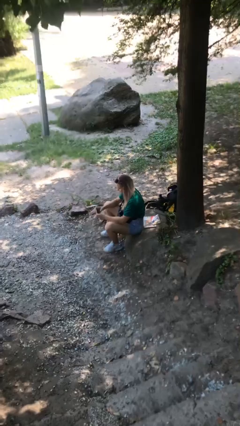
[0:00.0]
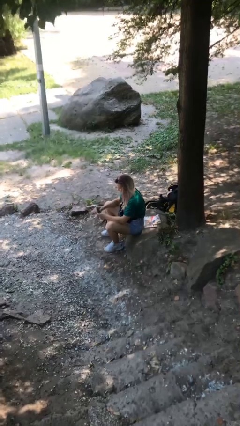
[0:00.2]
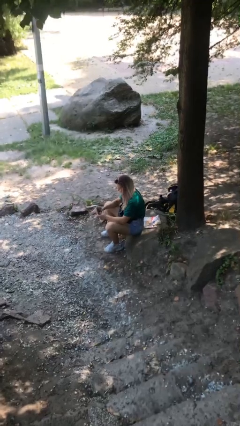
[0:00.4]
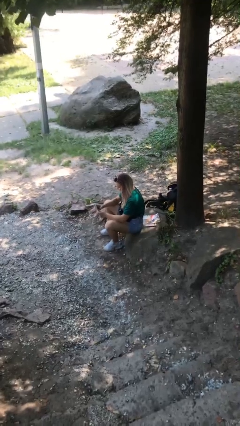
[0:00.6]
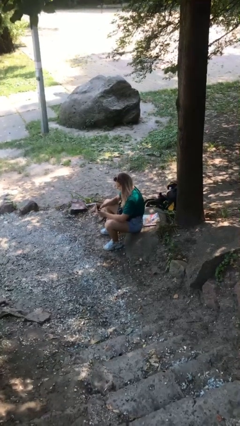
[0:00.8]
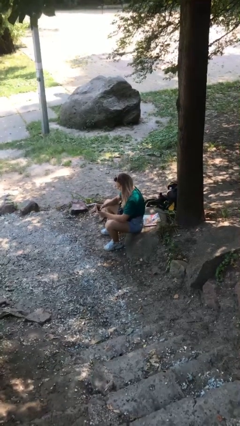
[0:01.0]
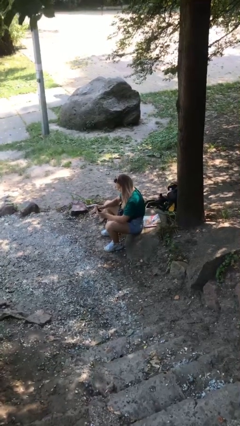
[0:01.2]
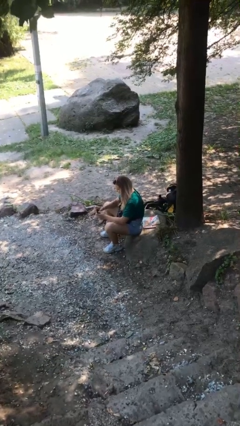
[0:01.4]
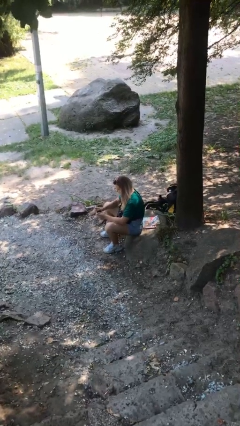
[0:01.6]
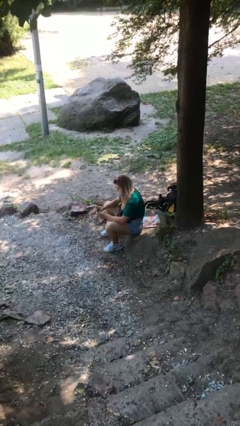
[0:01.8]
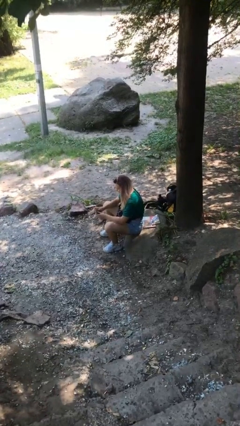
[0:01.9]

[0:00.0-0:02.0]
person interacts with handheld game

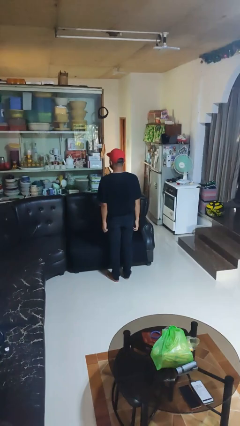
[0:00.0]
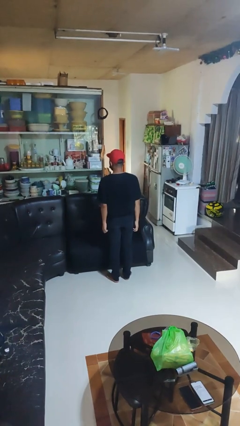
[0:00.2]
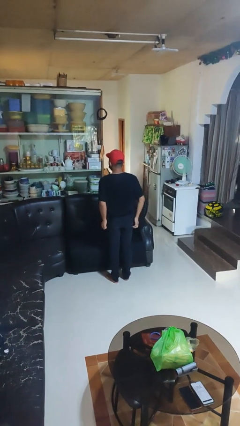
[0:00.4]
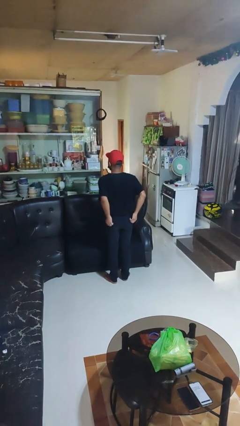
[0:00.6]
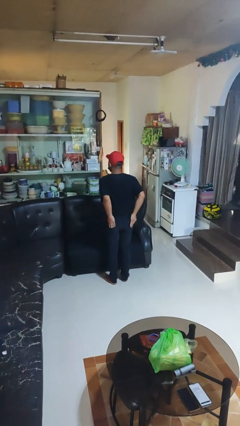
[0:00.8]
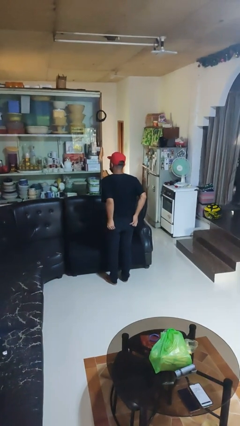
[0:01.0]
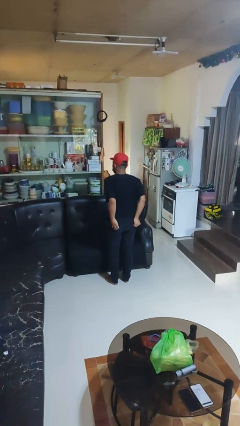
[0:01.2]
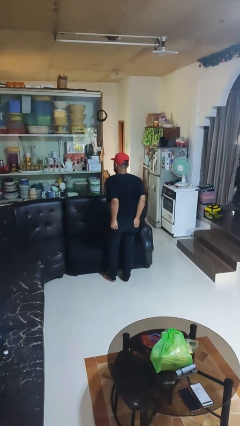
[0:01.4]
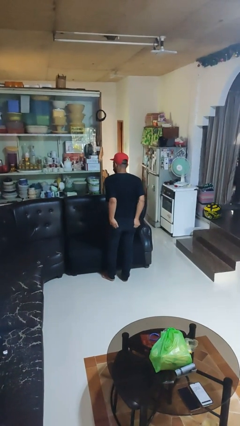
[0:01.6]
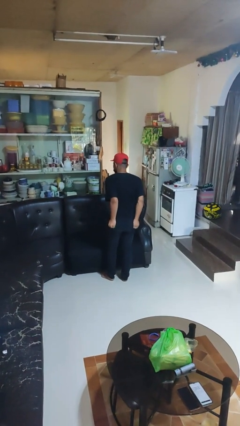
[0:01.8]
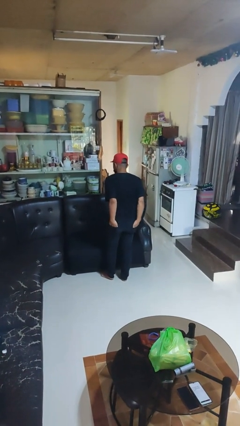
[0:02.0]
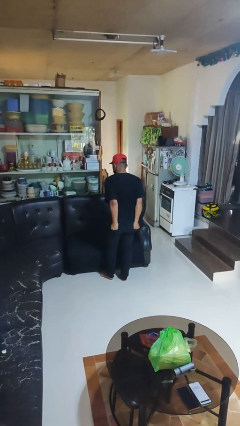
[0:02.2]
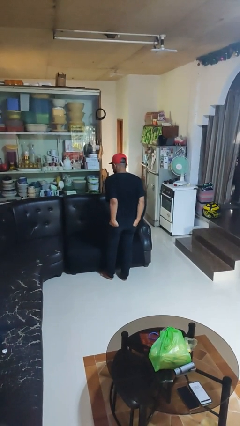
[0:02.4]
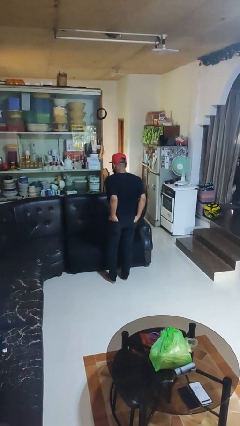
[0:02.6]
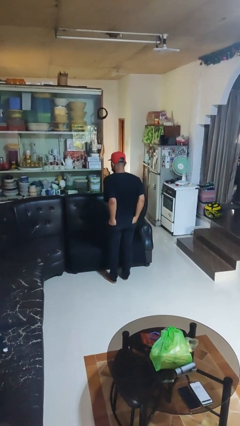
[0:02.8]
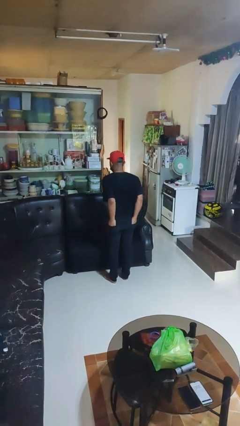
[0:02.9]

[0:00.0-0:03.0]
person puts hands in back pockets

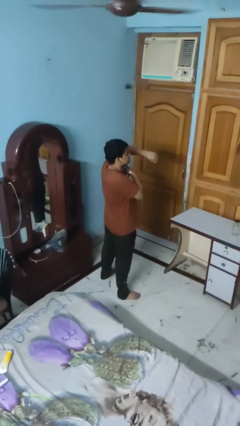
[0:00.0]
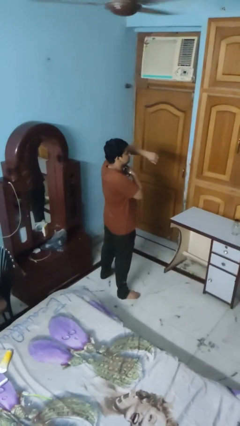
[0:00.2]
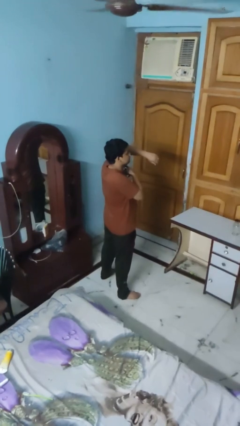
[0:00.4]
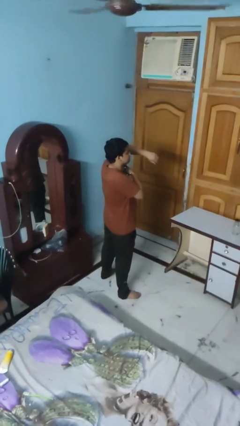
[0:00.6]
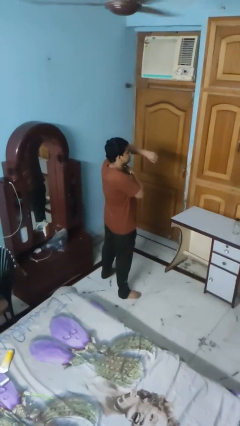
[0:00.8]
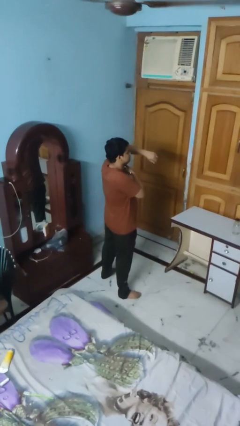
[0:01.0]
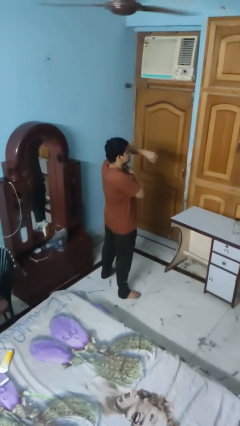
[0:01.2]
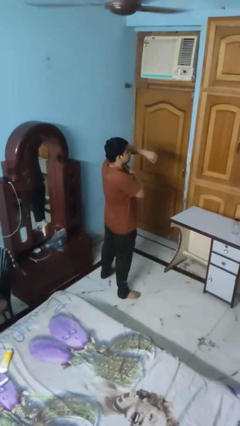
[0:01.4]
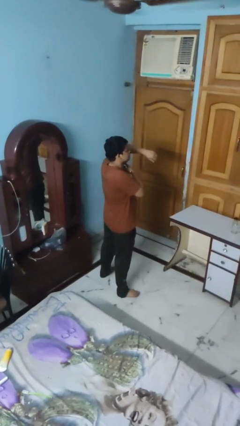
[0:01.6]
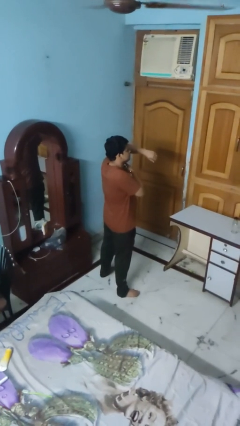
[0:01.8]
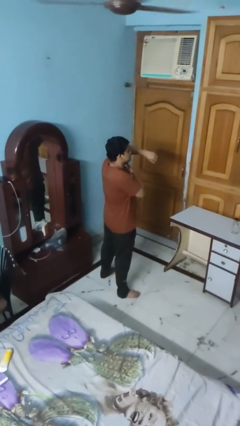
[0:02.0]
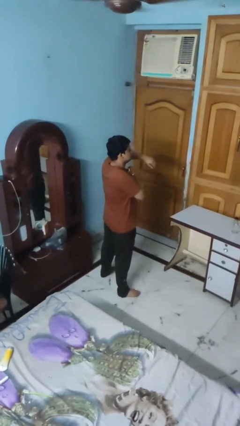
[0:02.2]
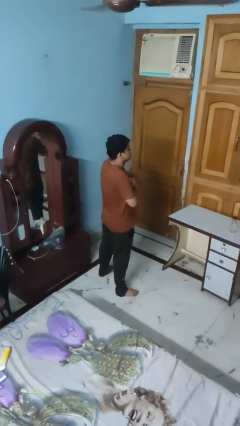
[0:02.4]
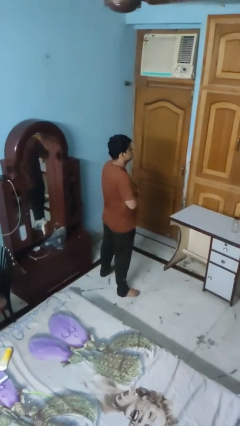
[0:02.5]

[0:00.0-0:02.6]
person applies deodorant

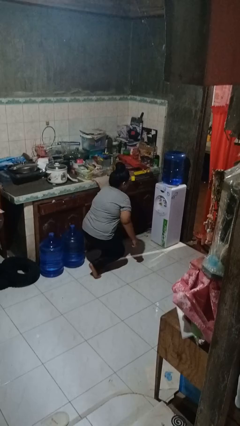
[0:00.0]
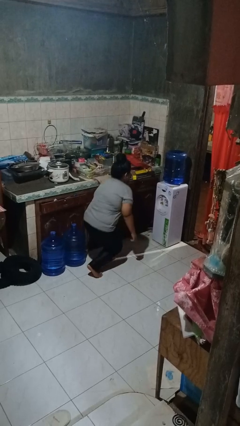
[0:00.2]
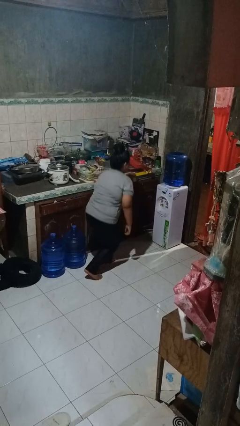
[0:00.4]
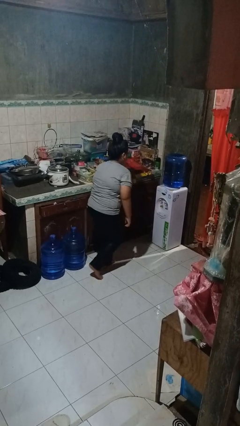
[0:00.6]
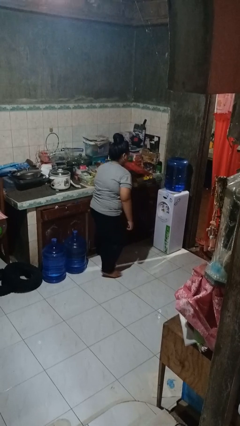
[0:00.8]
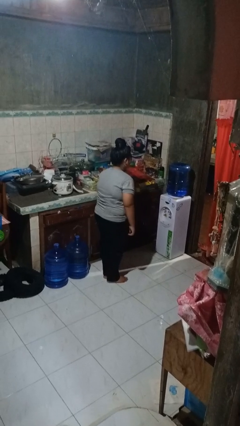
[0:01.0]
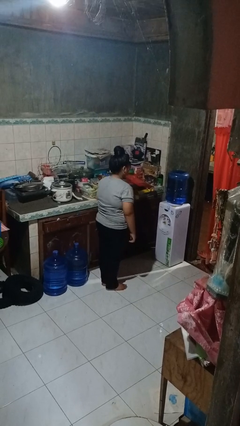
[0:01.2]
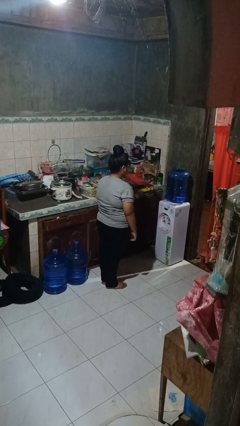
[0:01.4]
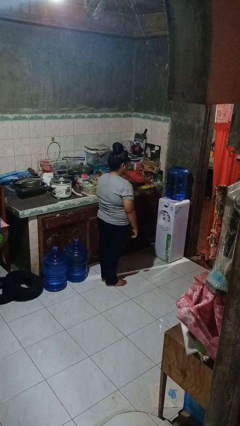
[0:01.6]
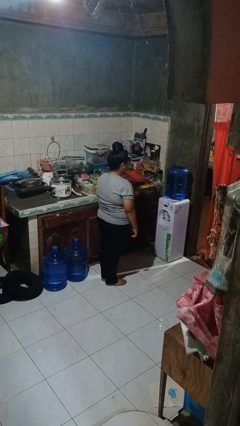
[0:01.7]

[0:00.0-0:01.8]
person stands up from floor

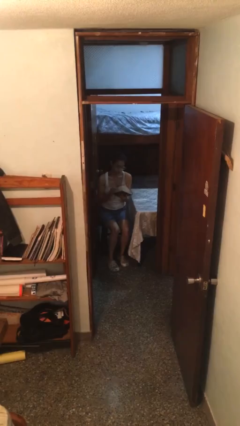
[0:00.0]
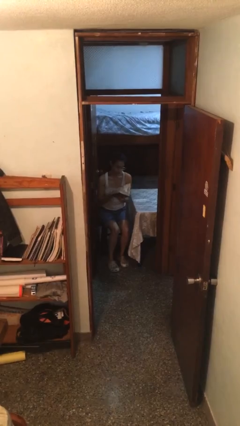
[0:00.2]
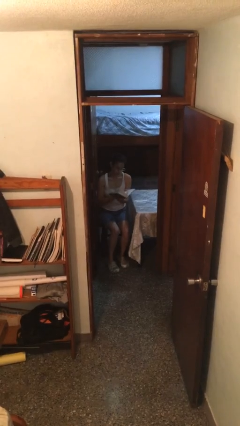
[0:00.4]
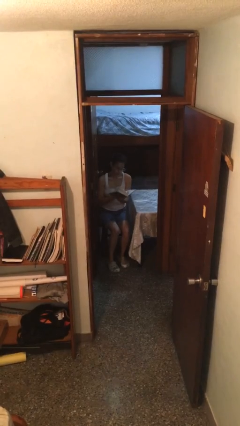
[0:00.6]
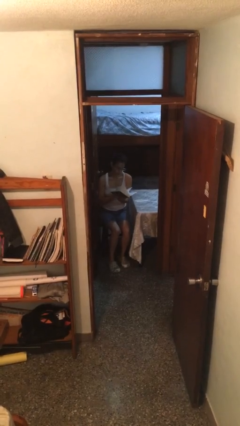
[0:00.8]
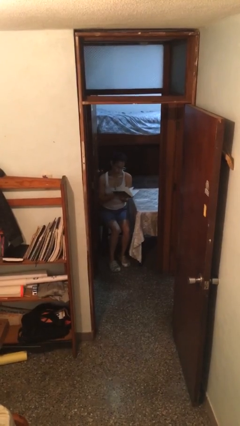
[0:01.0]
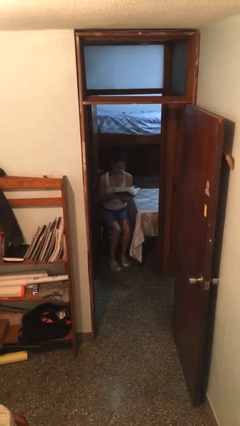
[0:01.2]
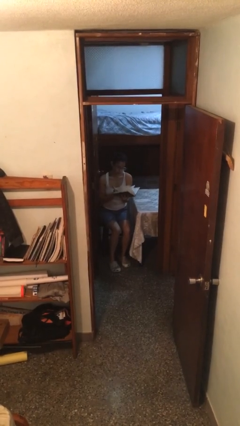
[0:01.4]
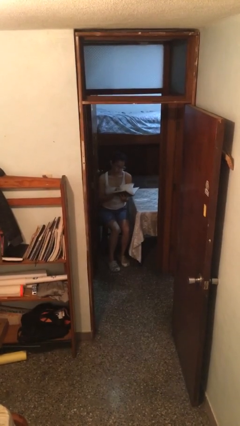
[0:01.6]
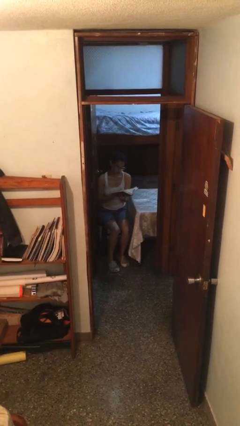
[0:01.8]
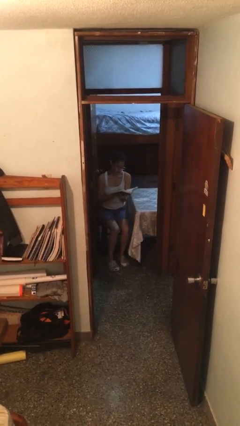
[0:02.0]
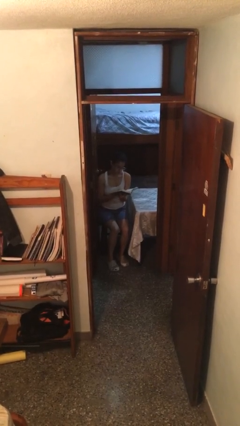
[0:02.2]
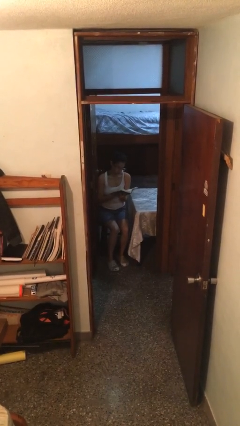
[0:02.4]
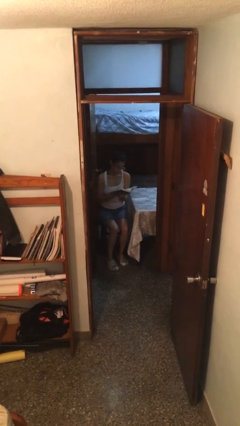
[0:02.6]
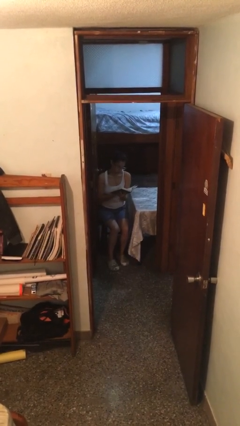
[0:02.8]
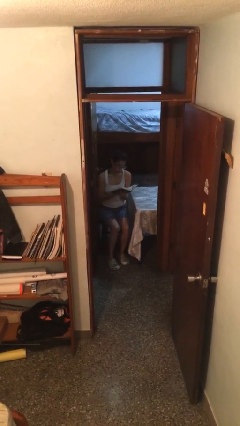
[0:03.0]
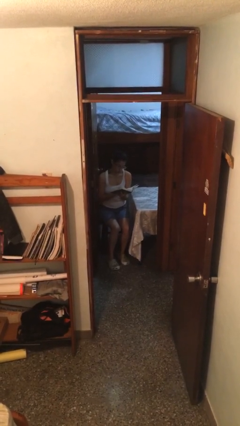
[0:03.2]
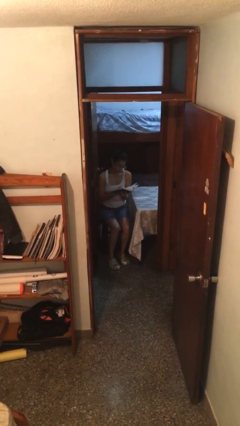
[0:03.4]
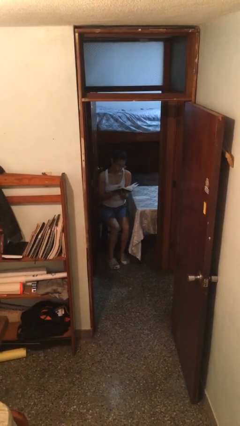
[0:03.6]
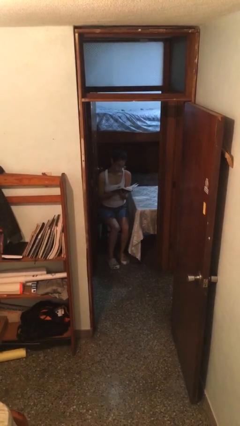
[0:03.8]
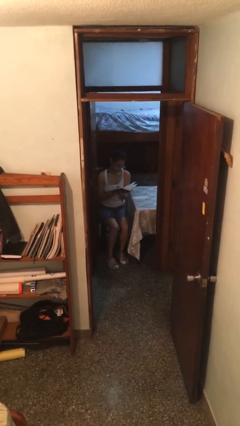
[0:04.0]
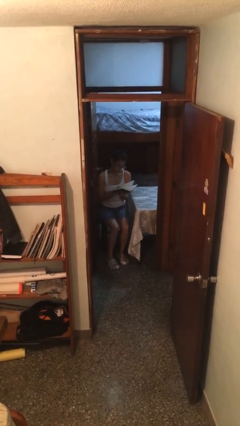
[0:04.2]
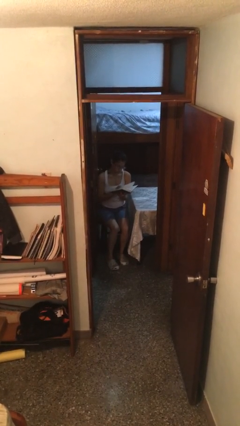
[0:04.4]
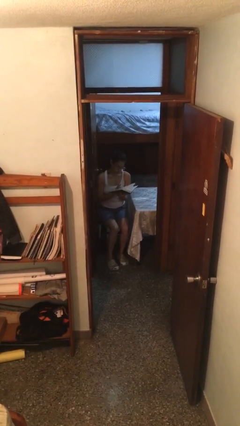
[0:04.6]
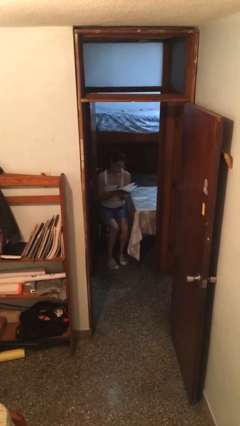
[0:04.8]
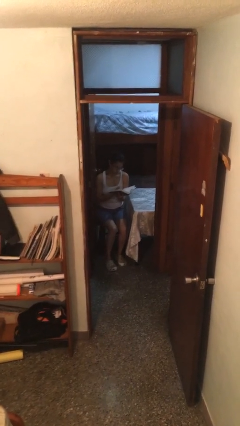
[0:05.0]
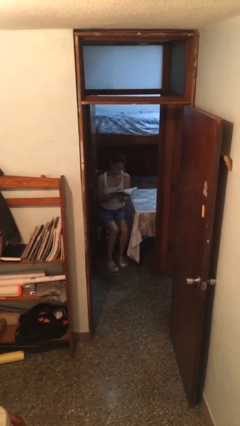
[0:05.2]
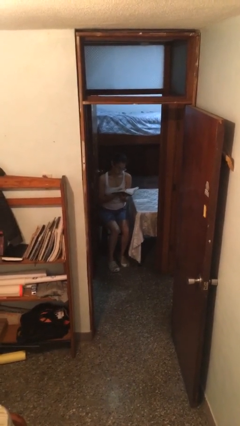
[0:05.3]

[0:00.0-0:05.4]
person reads document

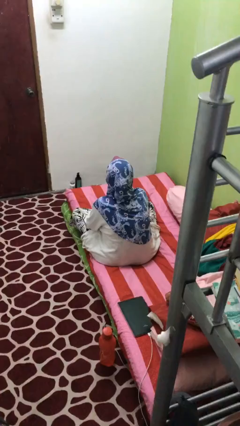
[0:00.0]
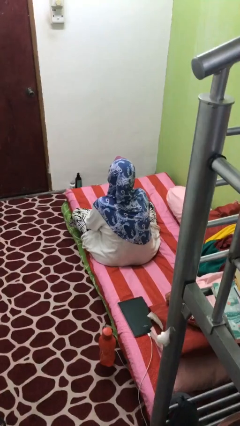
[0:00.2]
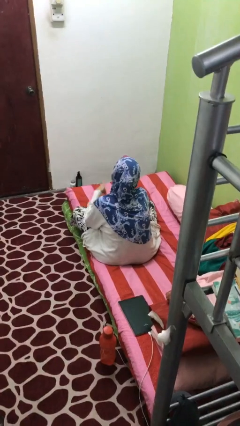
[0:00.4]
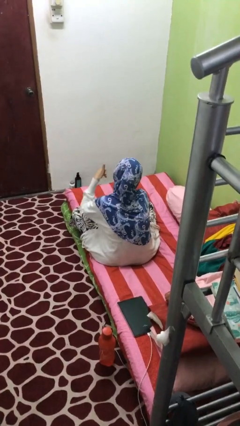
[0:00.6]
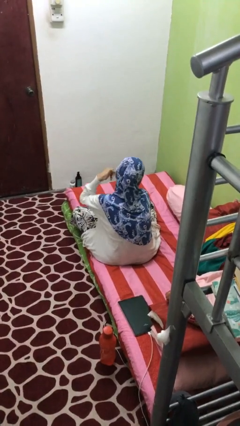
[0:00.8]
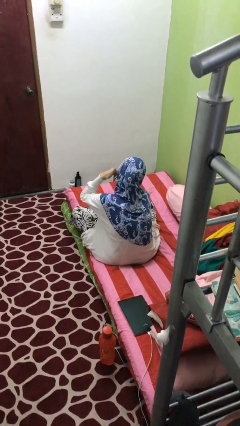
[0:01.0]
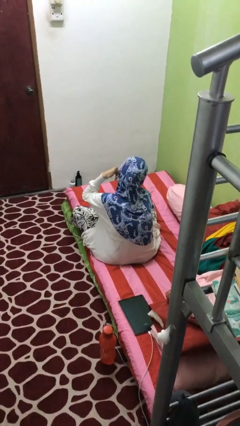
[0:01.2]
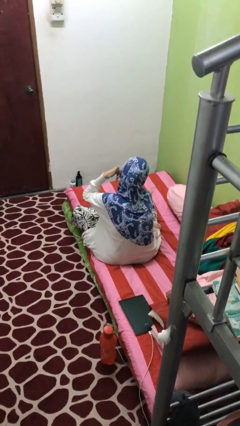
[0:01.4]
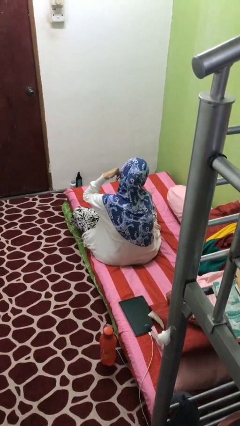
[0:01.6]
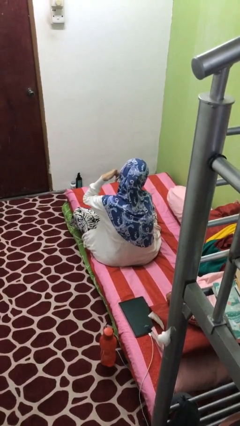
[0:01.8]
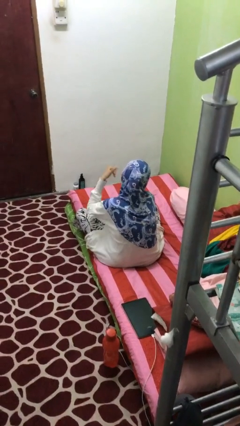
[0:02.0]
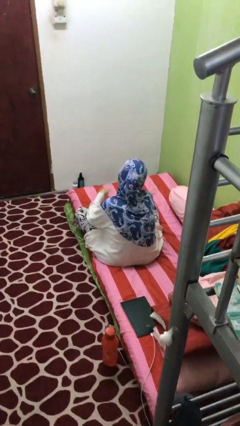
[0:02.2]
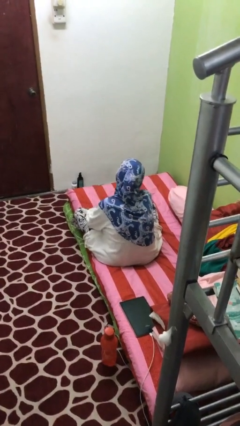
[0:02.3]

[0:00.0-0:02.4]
person gestures call me

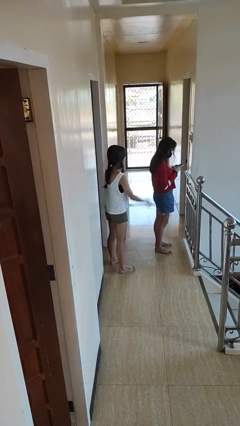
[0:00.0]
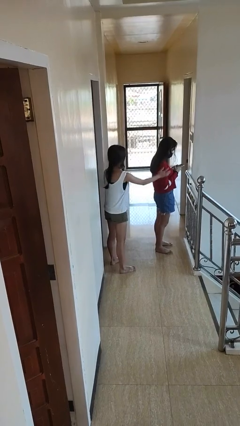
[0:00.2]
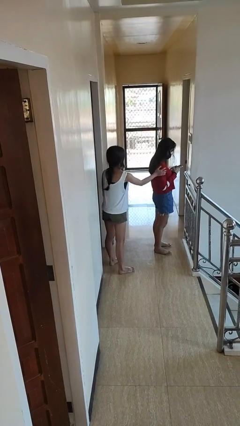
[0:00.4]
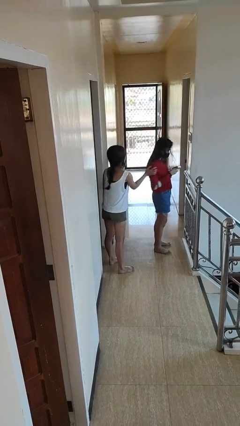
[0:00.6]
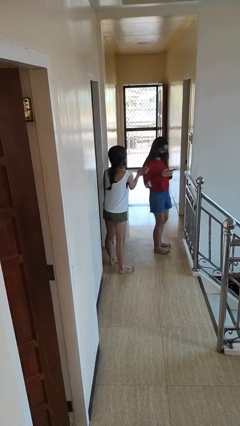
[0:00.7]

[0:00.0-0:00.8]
person grabs person by shoulder
